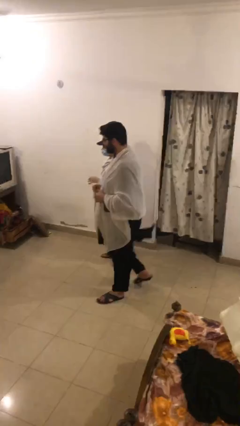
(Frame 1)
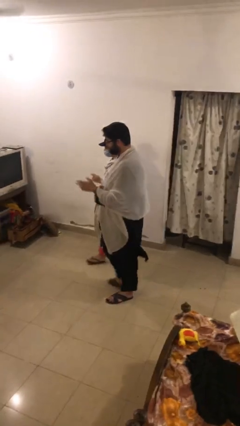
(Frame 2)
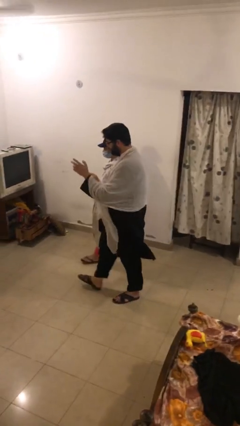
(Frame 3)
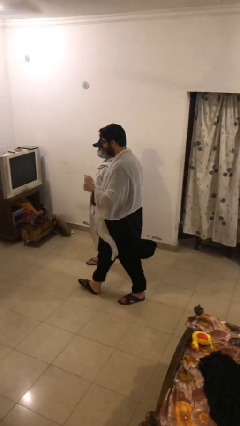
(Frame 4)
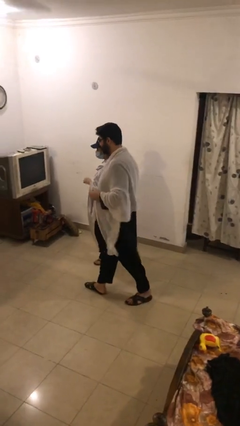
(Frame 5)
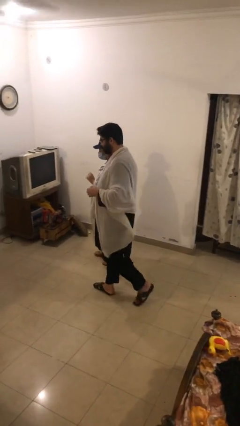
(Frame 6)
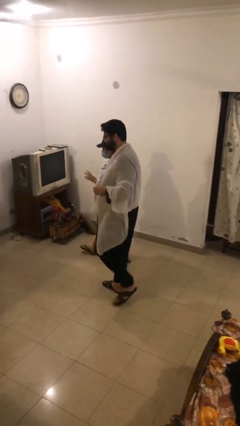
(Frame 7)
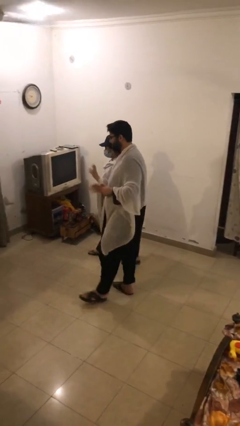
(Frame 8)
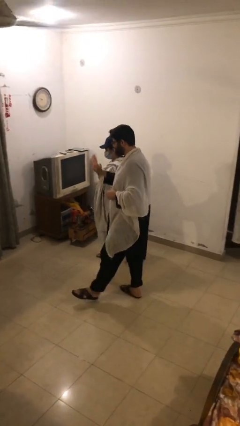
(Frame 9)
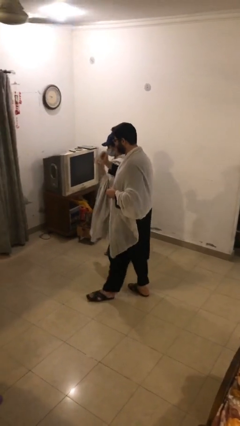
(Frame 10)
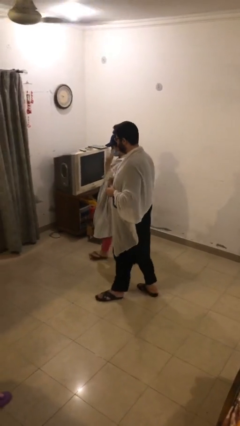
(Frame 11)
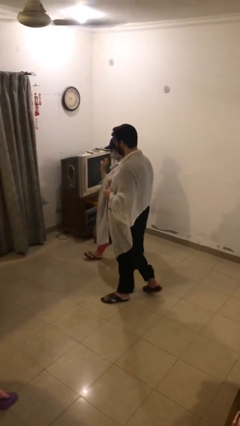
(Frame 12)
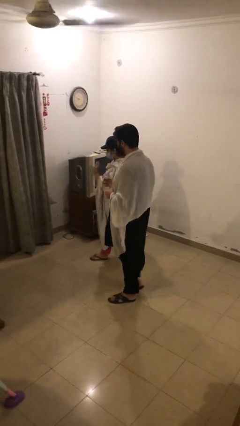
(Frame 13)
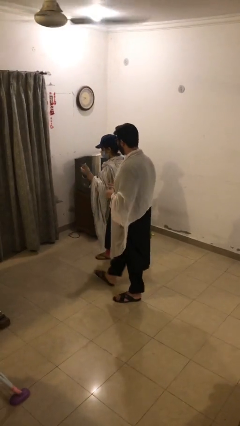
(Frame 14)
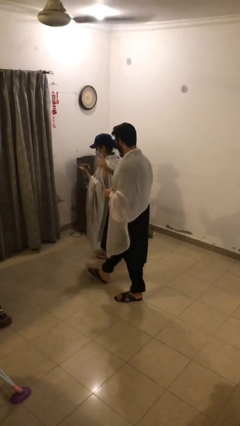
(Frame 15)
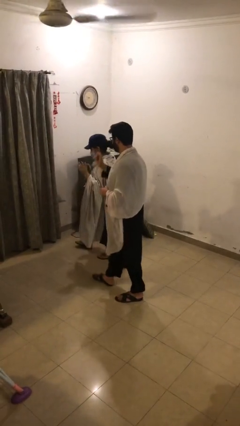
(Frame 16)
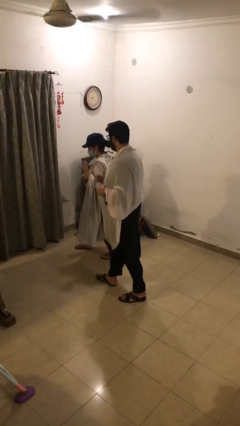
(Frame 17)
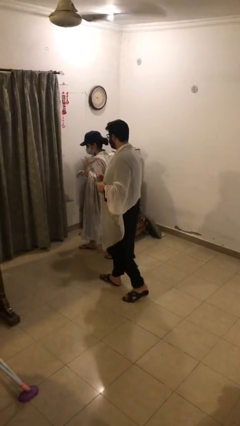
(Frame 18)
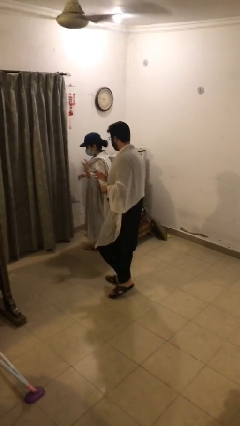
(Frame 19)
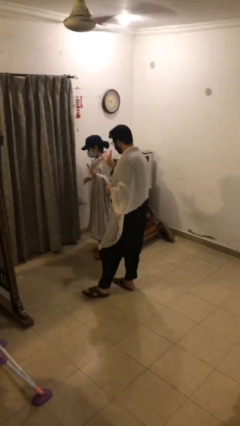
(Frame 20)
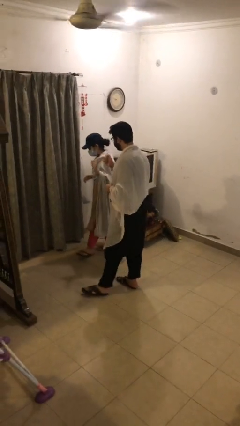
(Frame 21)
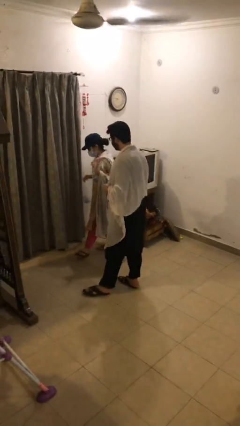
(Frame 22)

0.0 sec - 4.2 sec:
person talks to person

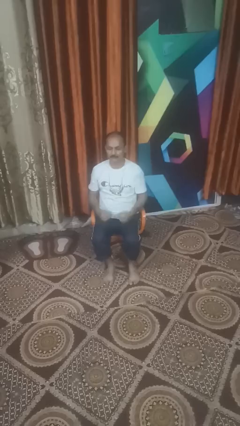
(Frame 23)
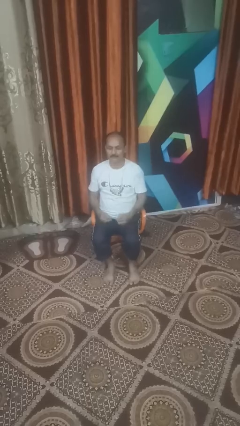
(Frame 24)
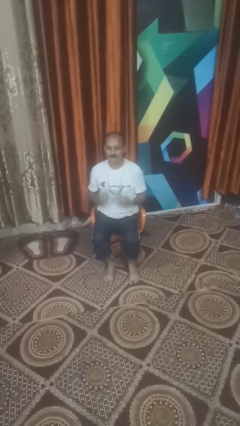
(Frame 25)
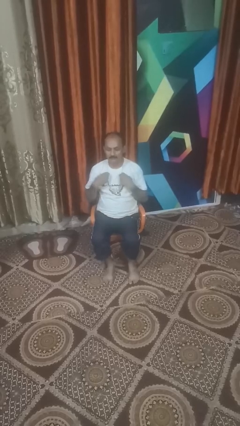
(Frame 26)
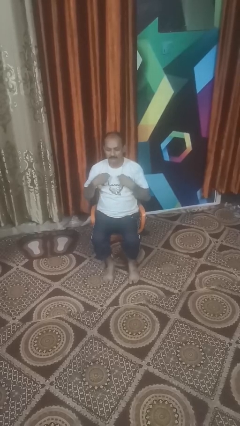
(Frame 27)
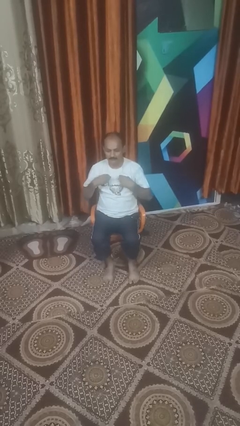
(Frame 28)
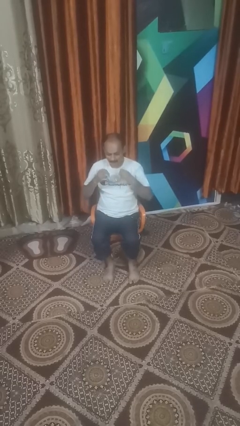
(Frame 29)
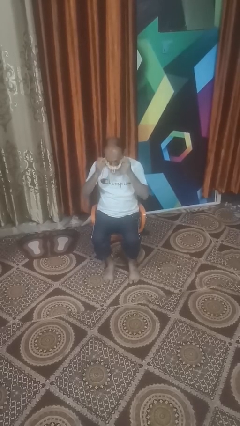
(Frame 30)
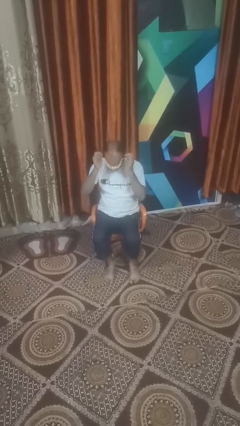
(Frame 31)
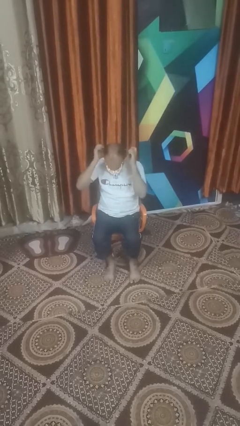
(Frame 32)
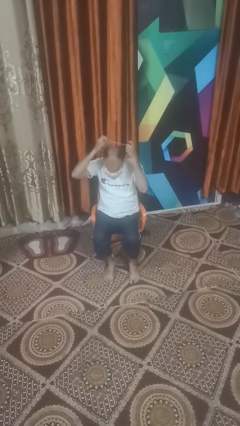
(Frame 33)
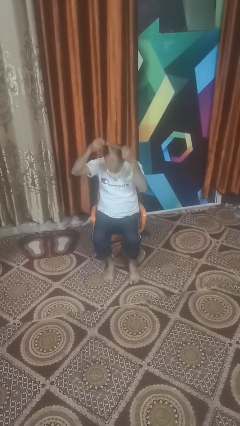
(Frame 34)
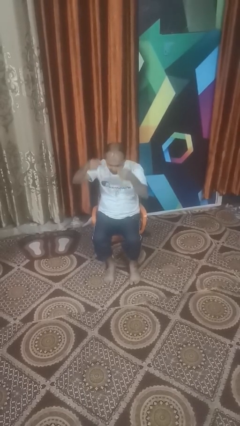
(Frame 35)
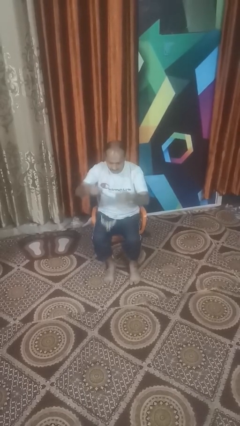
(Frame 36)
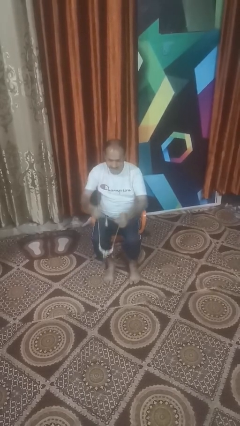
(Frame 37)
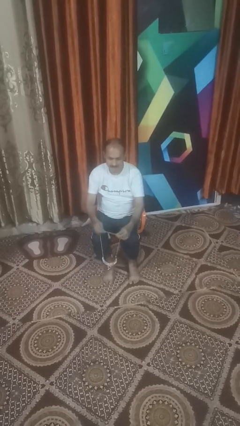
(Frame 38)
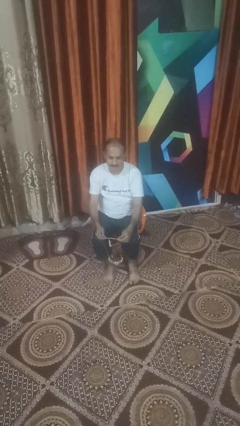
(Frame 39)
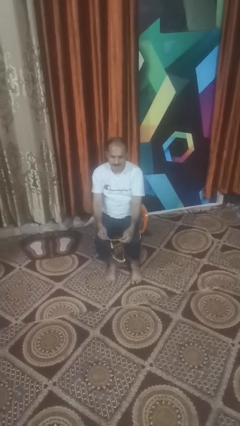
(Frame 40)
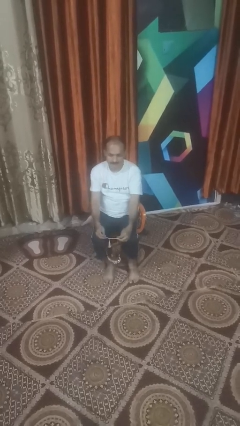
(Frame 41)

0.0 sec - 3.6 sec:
person takes off necklace

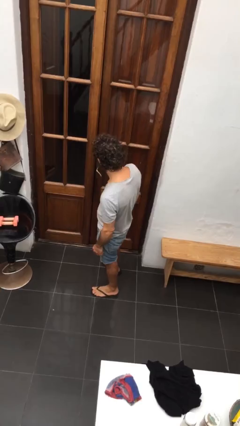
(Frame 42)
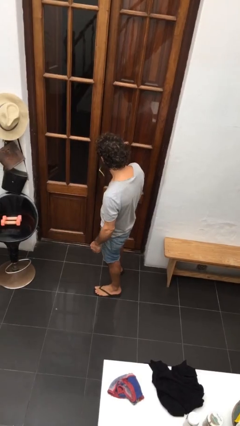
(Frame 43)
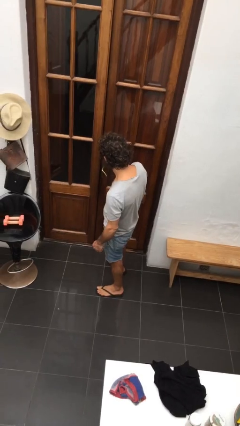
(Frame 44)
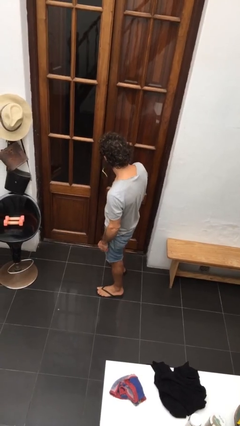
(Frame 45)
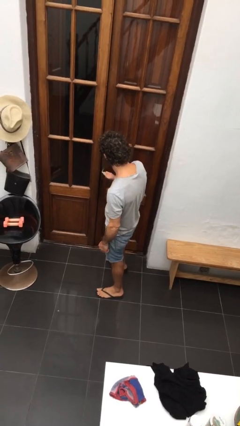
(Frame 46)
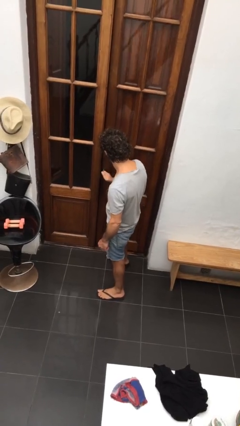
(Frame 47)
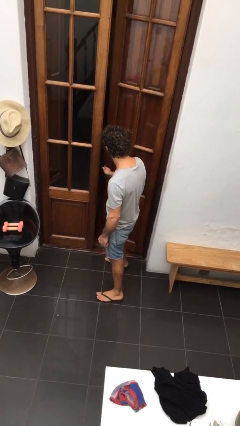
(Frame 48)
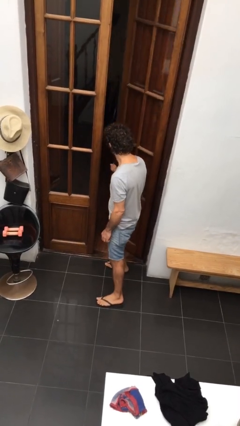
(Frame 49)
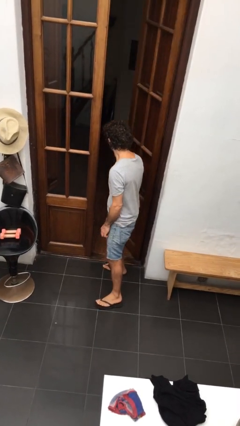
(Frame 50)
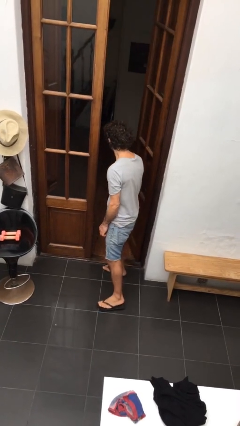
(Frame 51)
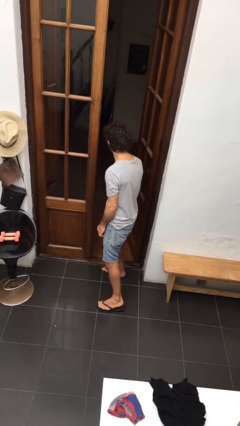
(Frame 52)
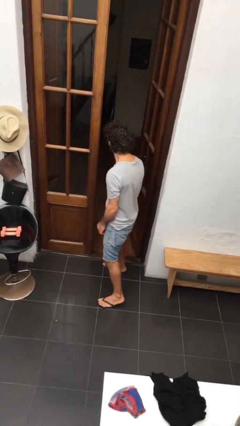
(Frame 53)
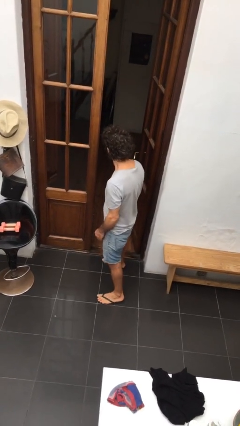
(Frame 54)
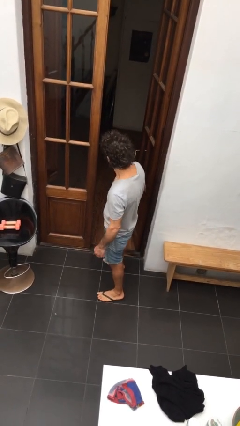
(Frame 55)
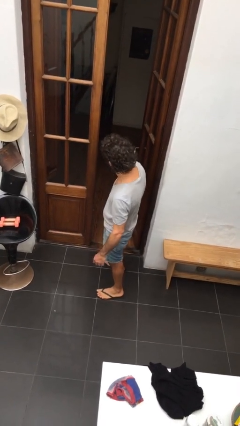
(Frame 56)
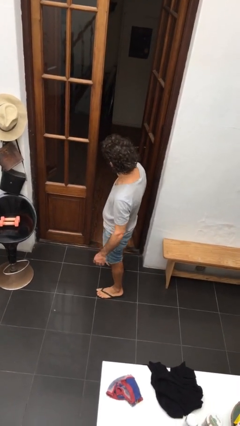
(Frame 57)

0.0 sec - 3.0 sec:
person opens facility door

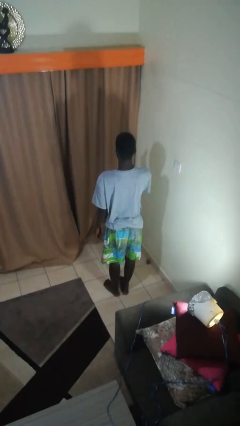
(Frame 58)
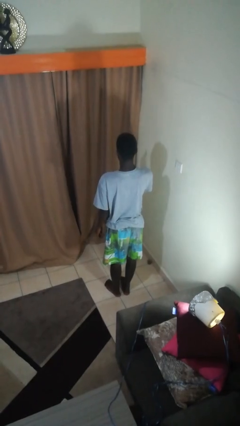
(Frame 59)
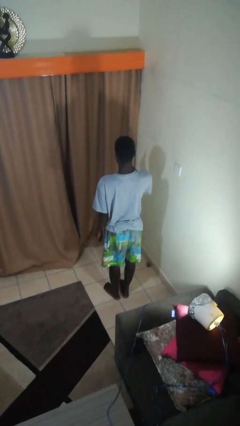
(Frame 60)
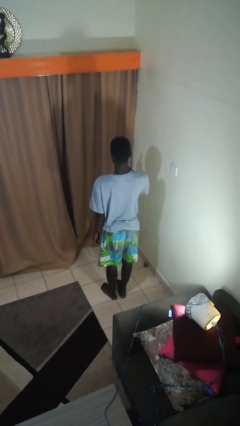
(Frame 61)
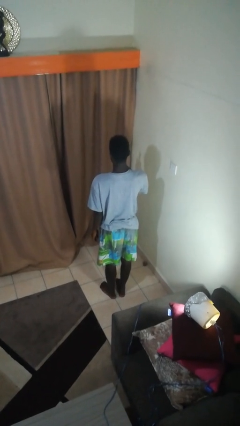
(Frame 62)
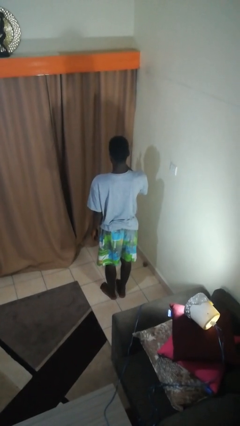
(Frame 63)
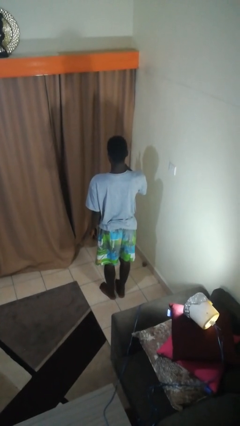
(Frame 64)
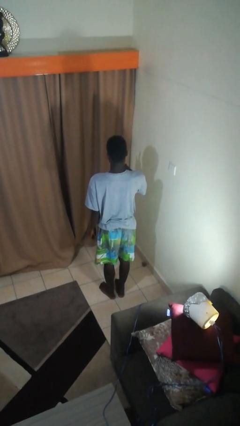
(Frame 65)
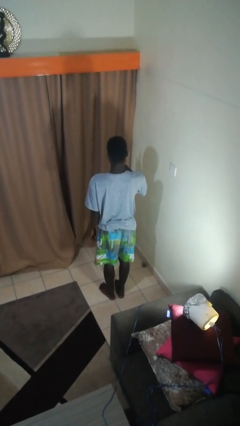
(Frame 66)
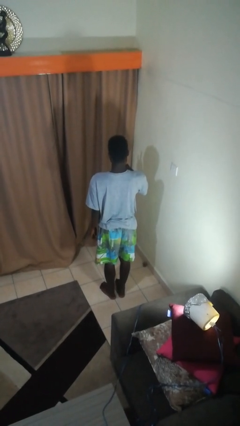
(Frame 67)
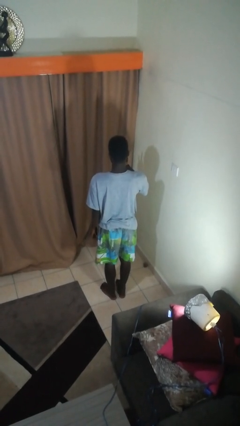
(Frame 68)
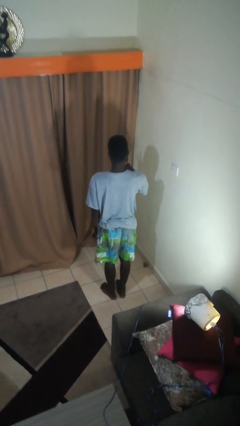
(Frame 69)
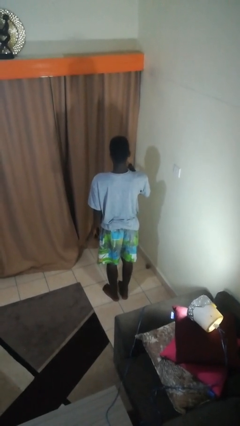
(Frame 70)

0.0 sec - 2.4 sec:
person gestures number three

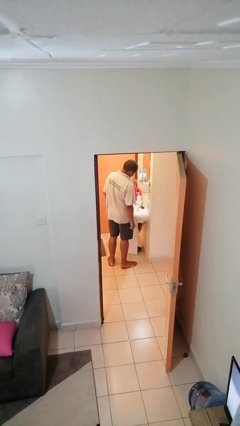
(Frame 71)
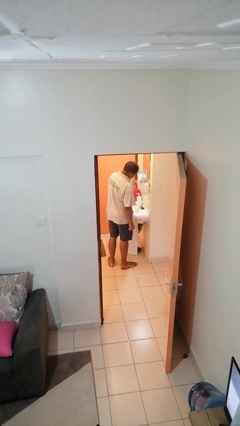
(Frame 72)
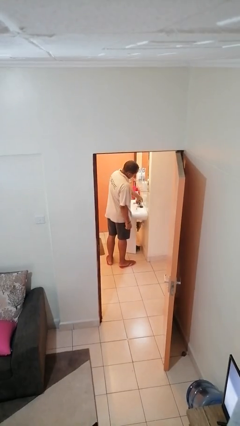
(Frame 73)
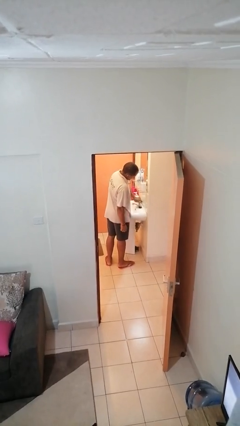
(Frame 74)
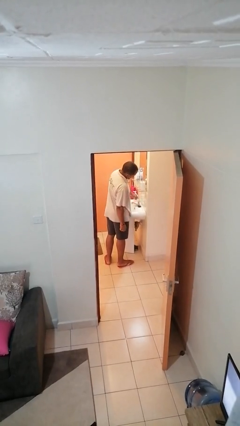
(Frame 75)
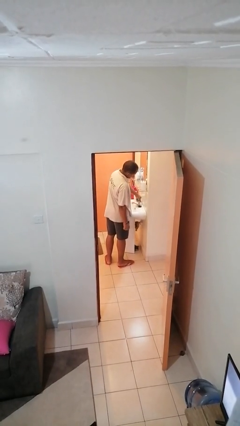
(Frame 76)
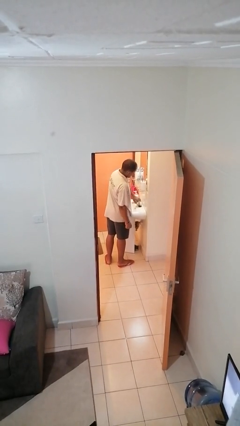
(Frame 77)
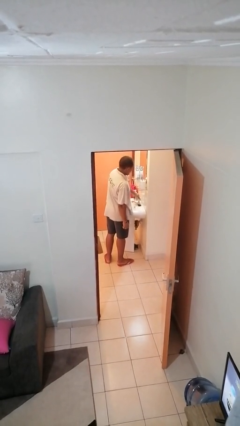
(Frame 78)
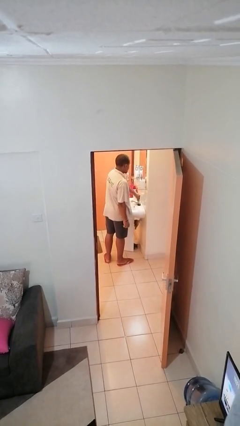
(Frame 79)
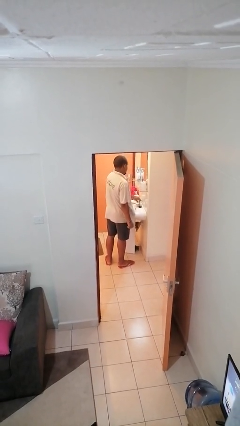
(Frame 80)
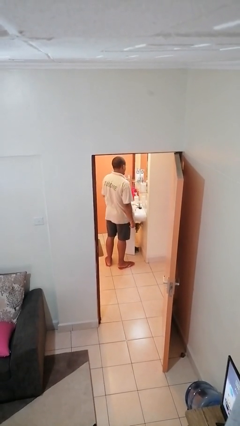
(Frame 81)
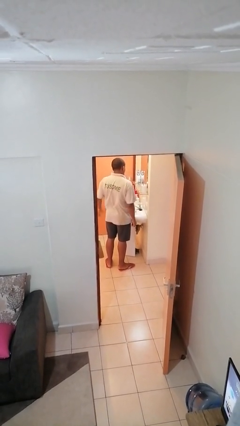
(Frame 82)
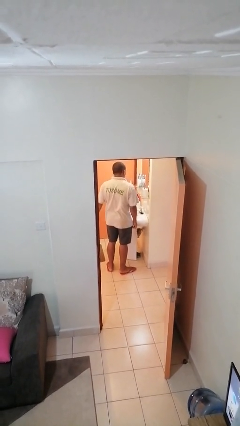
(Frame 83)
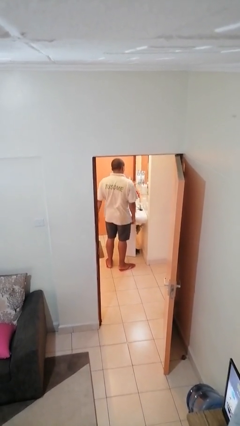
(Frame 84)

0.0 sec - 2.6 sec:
person turns off faucet

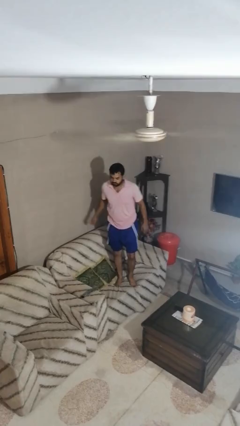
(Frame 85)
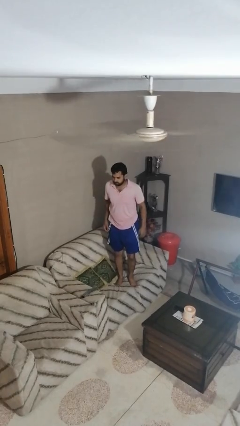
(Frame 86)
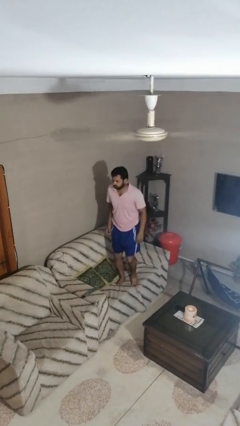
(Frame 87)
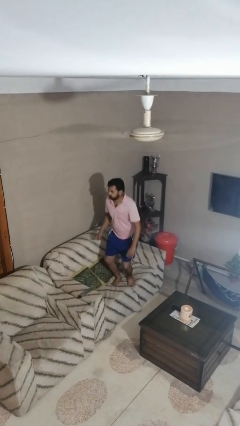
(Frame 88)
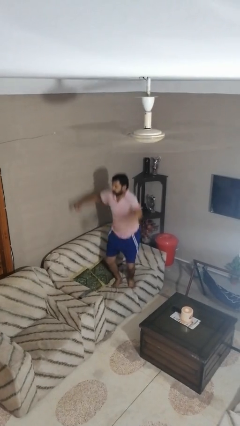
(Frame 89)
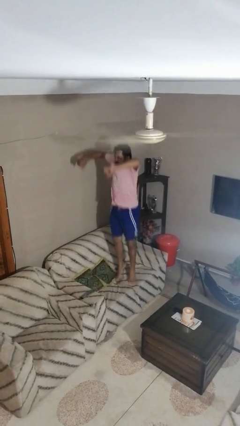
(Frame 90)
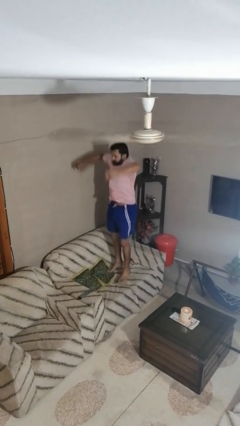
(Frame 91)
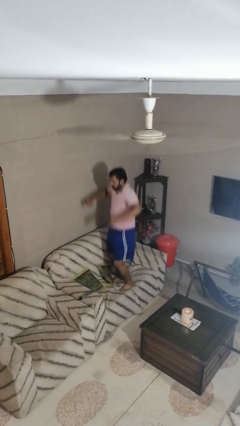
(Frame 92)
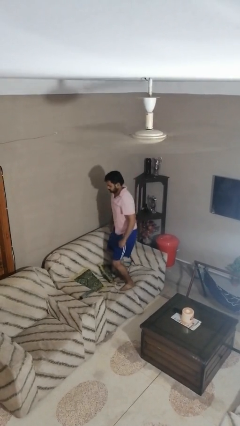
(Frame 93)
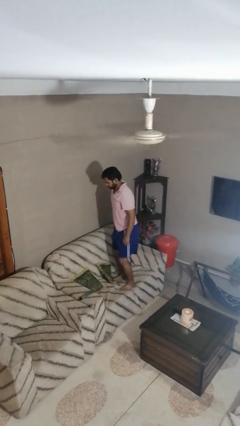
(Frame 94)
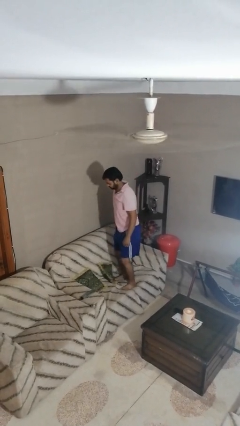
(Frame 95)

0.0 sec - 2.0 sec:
person jumps on couch
